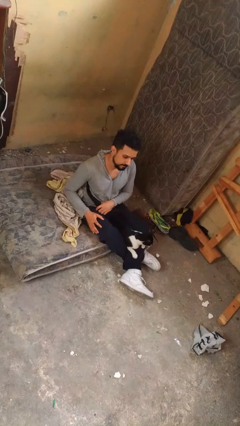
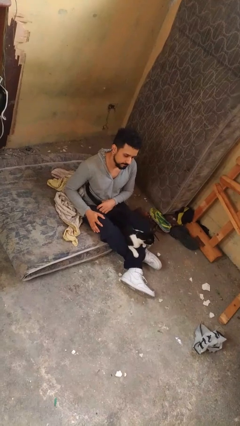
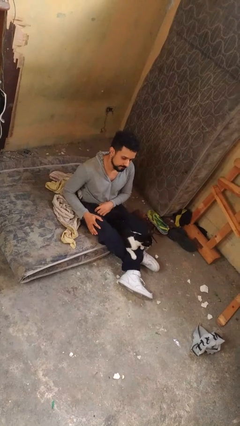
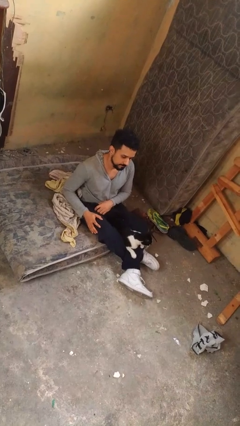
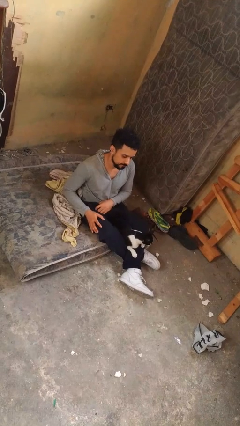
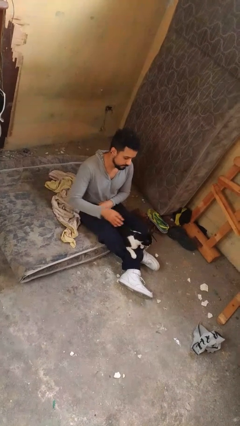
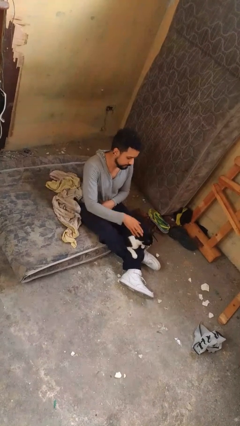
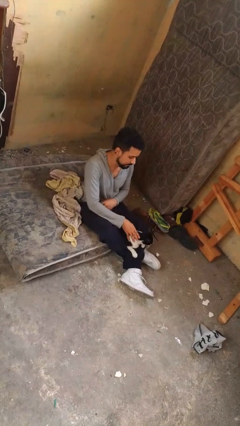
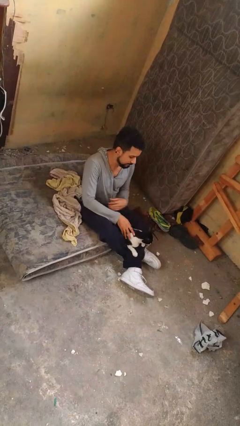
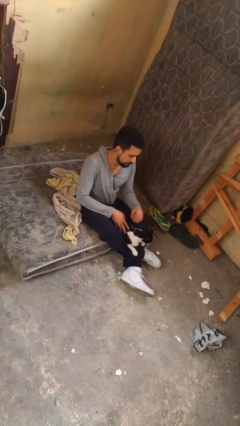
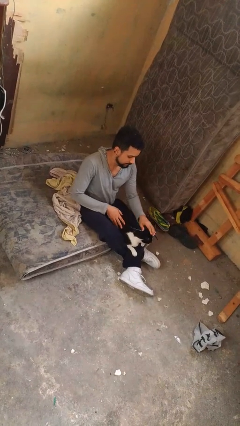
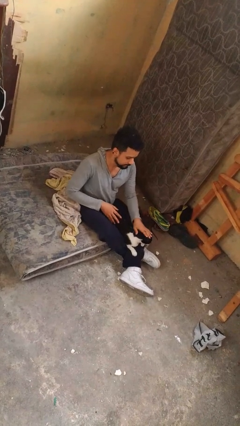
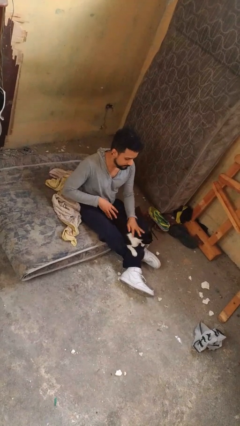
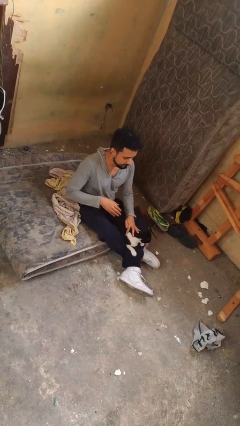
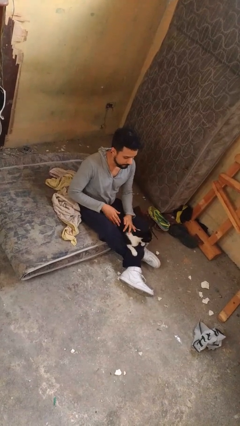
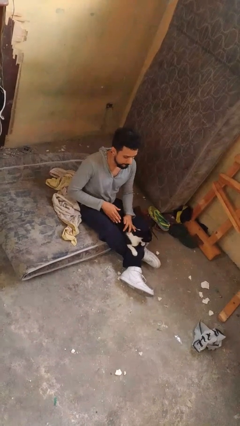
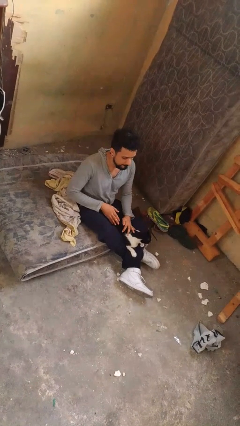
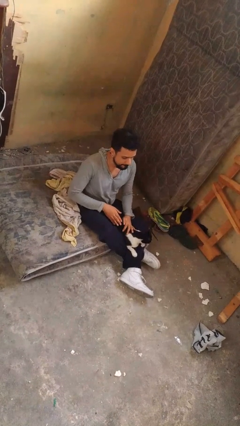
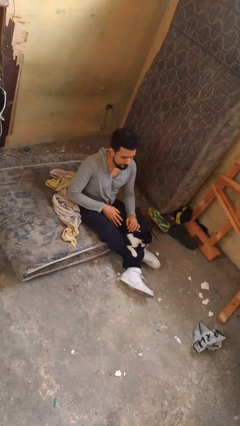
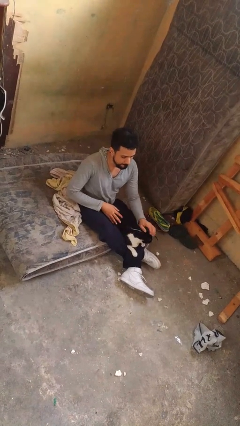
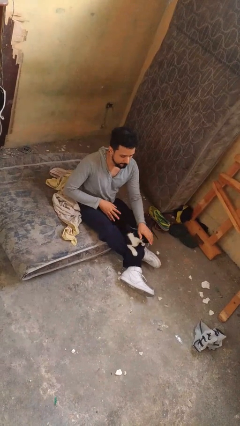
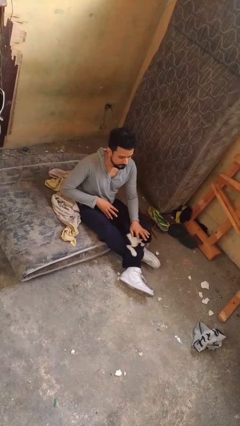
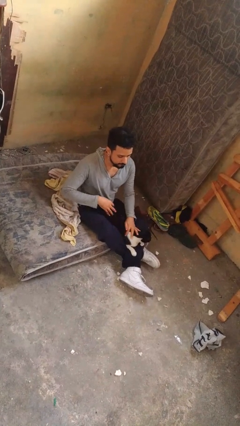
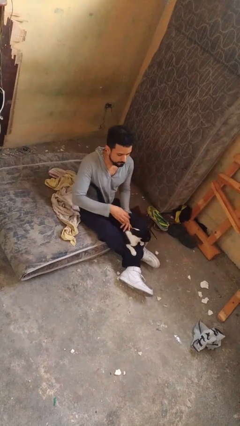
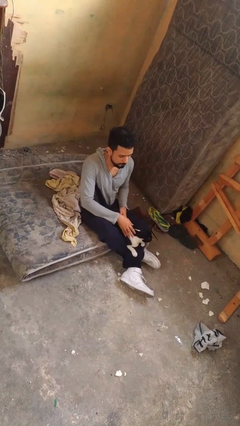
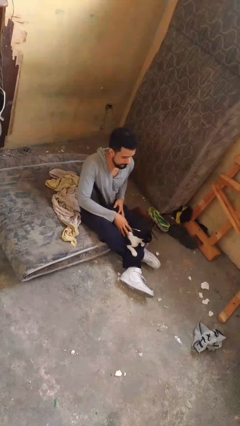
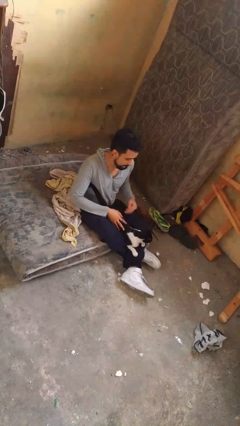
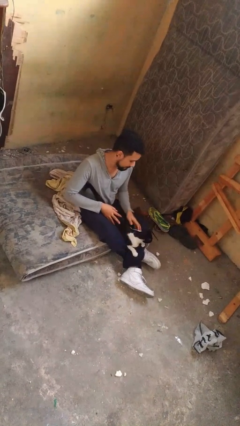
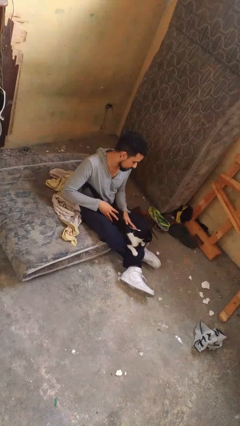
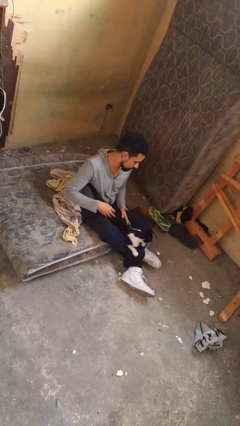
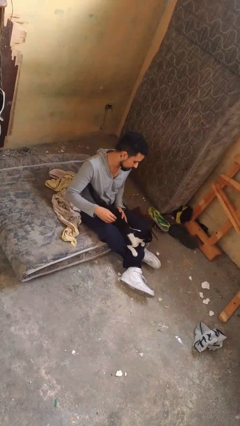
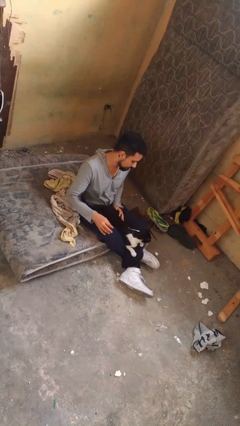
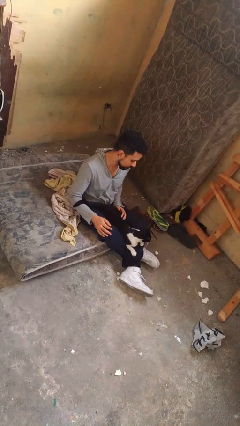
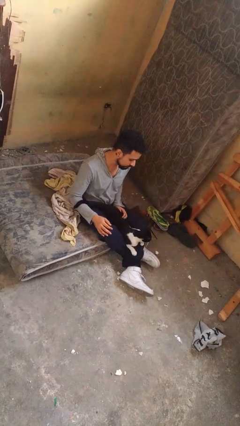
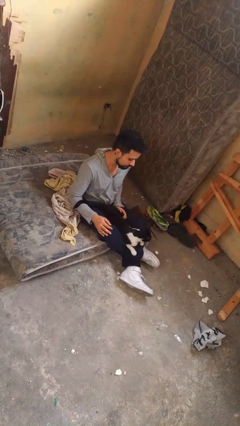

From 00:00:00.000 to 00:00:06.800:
person pets cat

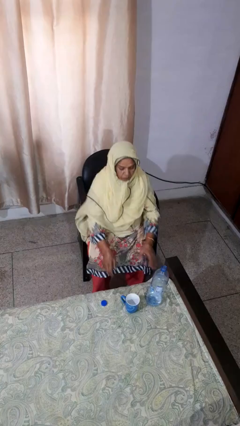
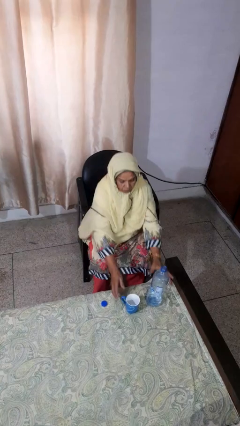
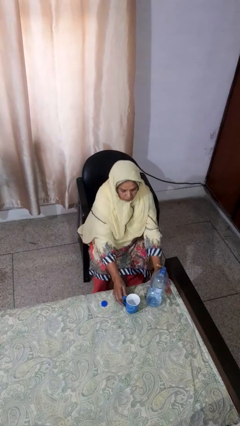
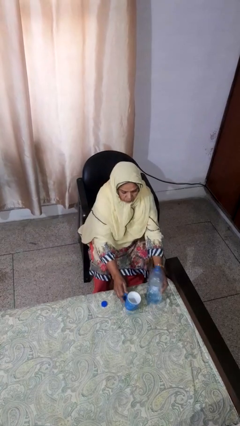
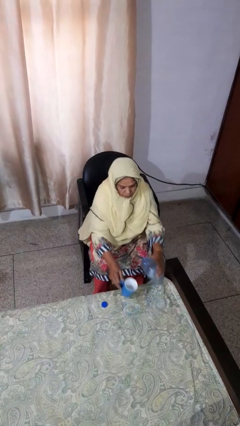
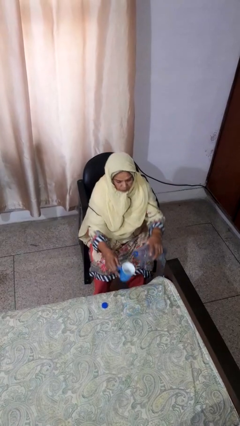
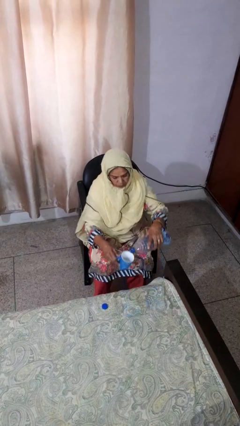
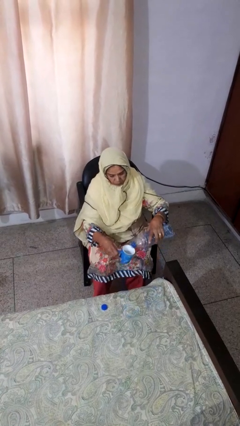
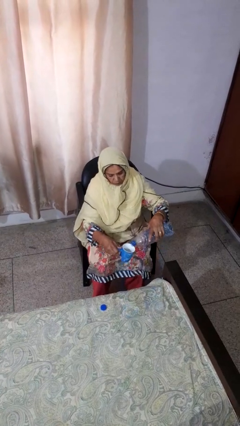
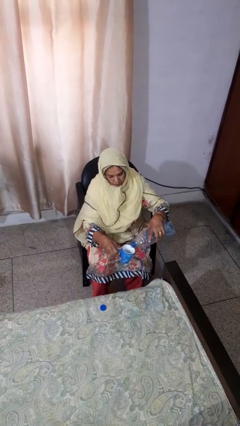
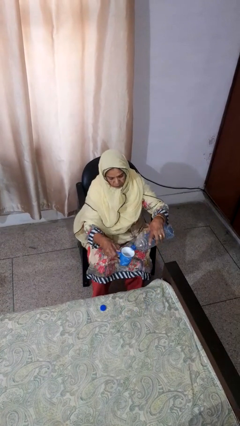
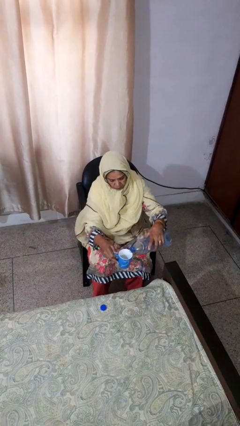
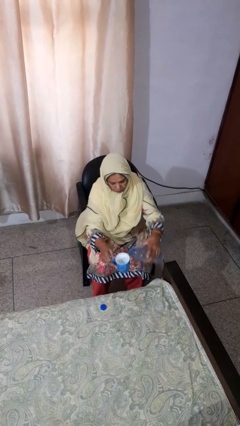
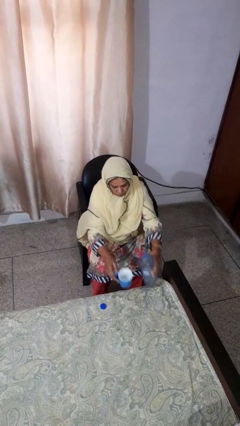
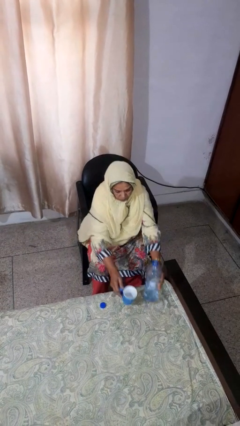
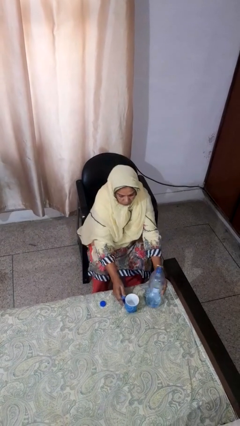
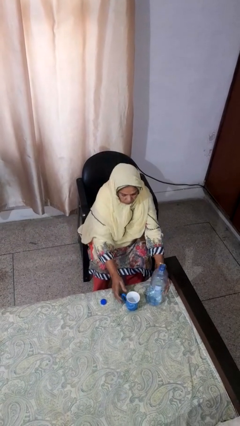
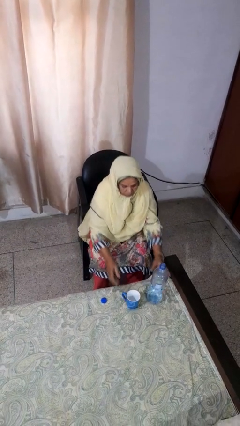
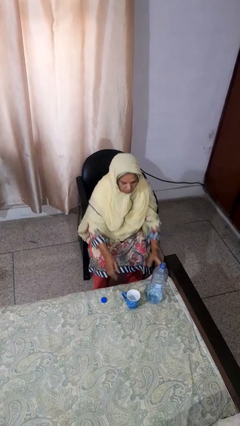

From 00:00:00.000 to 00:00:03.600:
person pours liquid into cup

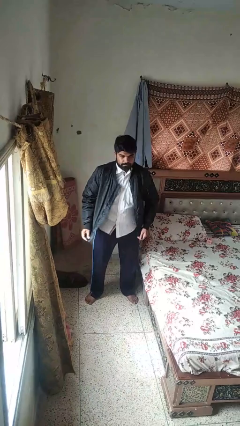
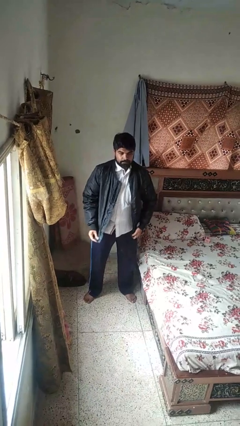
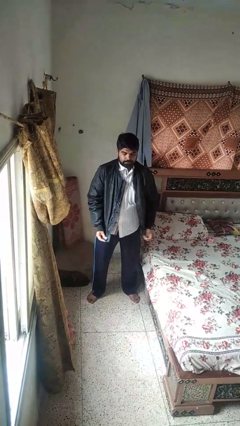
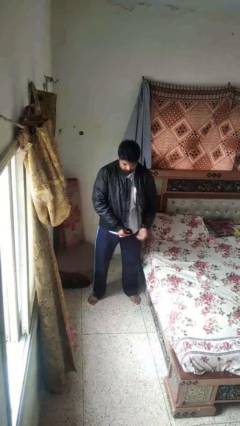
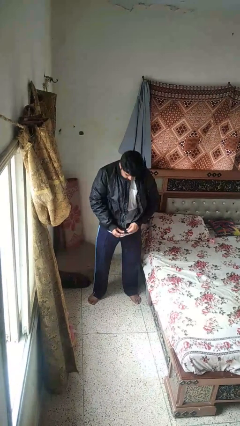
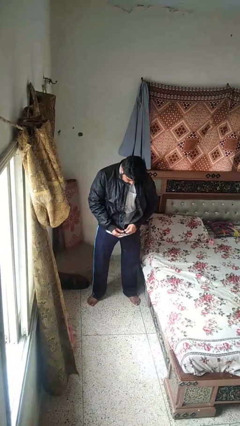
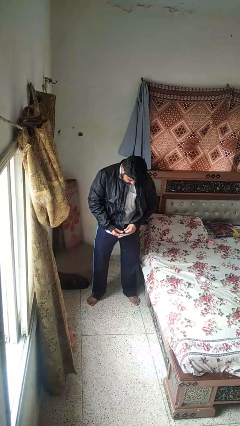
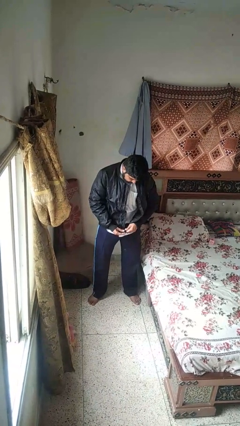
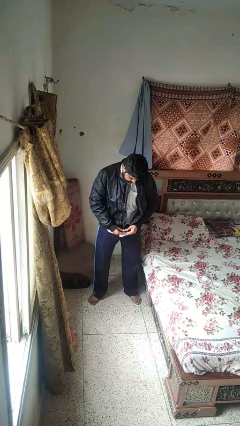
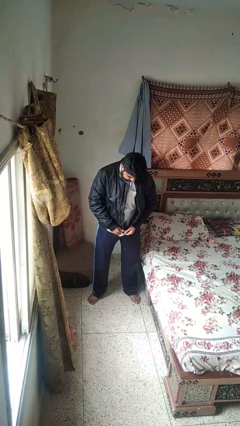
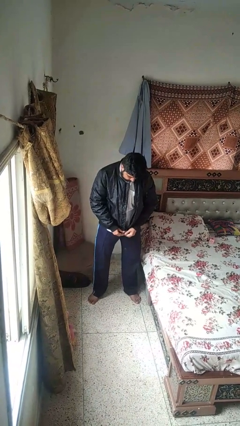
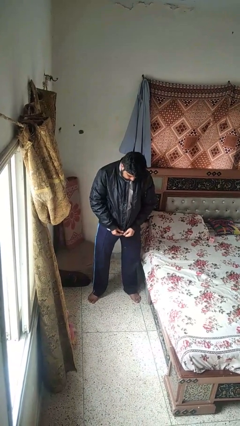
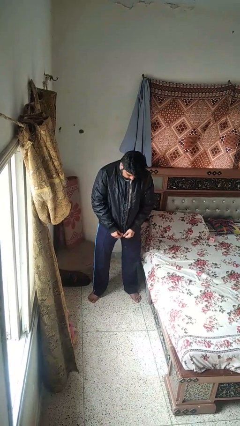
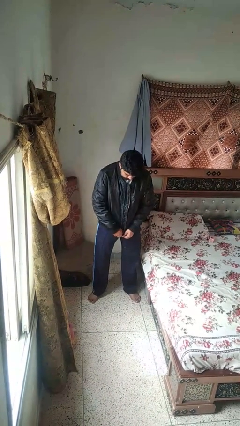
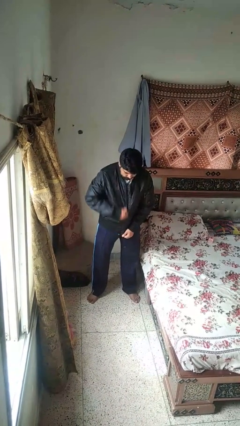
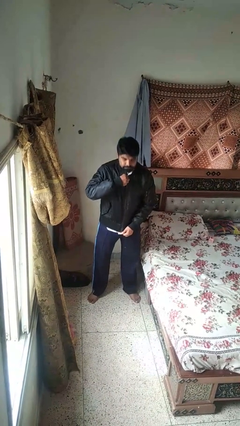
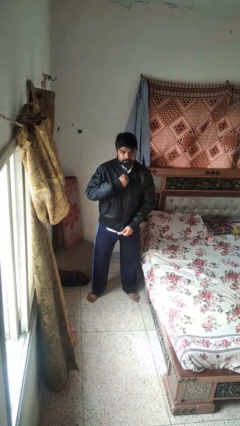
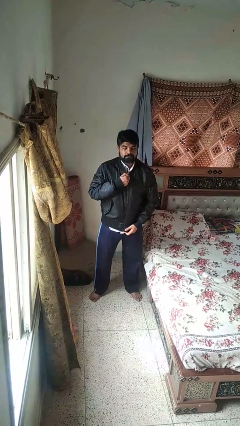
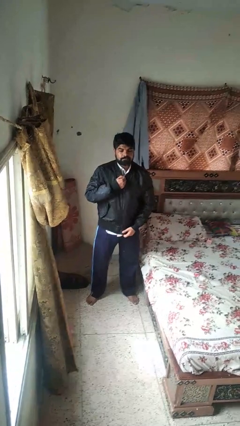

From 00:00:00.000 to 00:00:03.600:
person zips up jacket

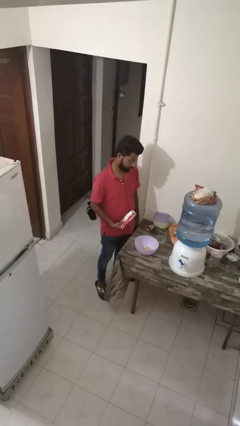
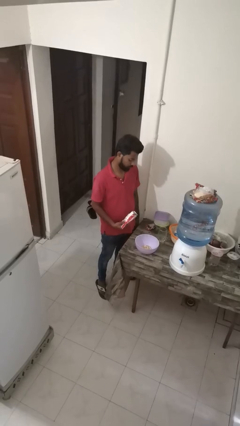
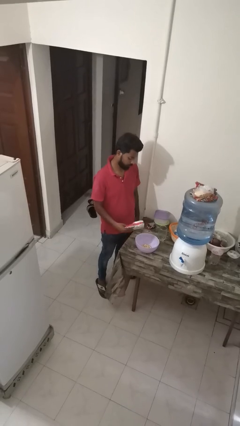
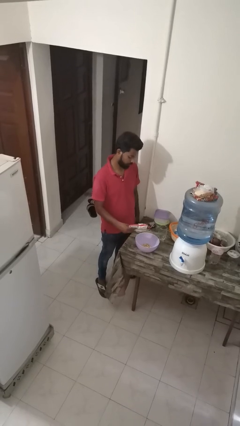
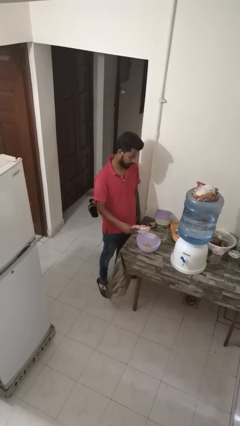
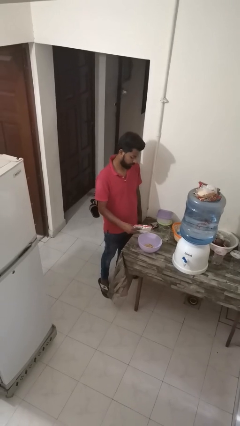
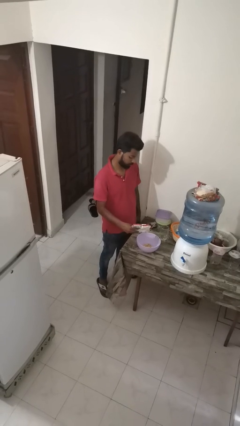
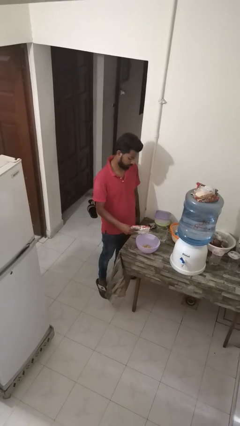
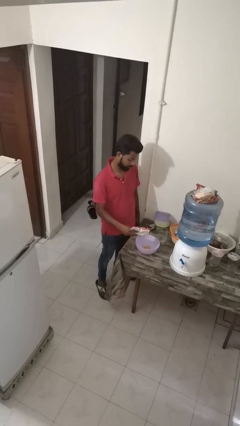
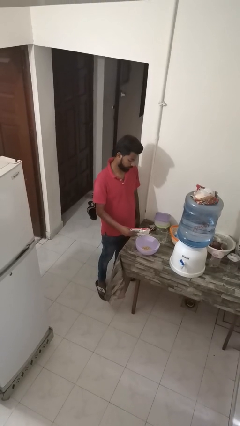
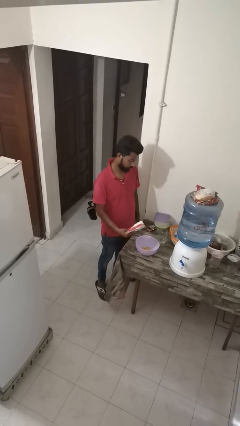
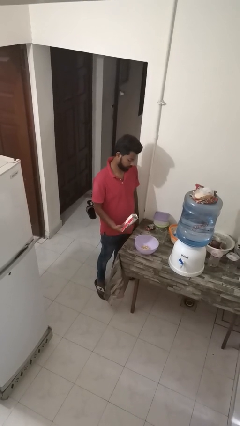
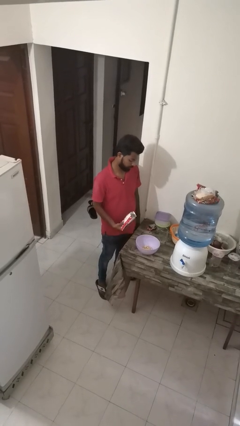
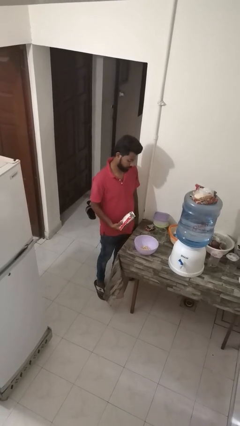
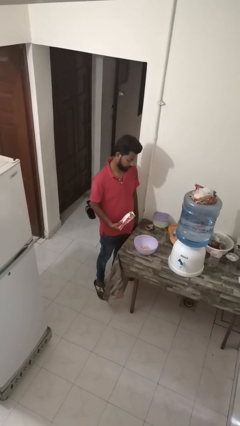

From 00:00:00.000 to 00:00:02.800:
person pours into bowl

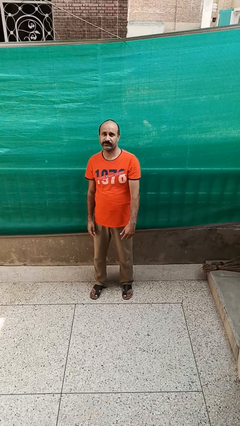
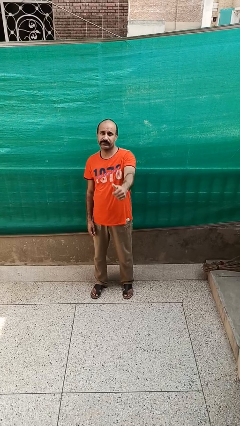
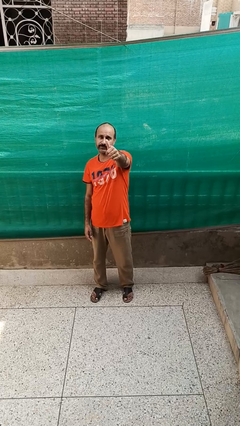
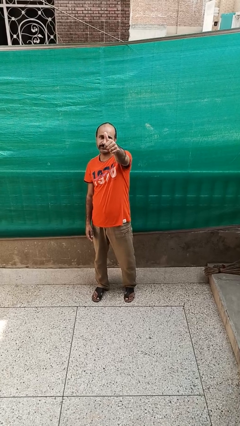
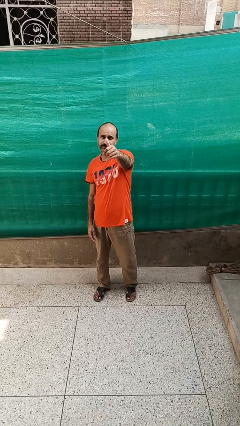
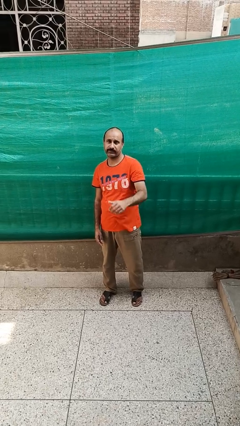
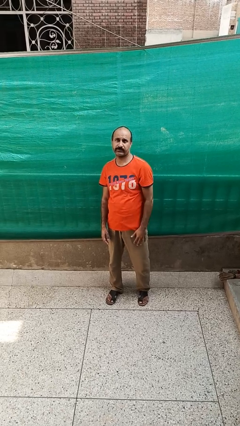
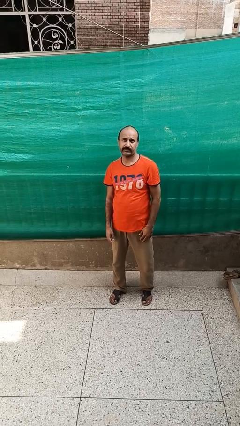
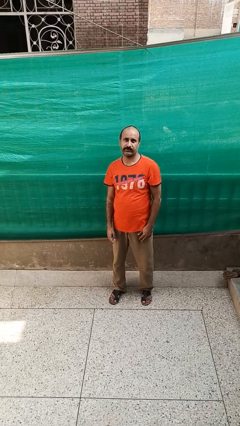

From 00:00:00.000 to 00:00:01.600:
person gestures thumbs up
